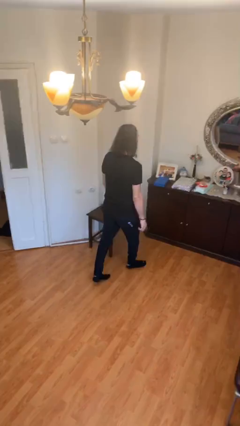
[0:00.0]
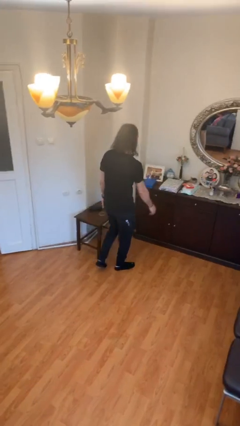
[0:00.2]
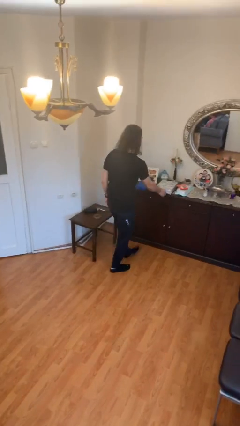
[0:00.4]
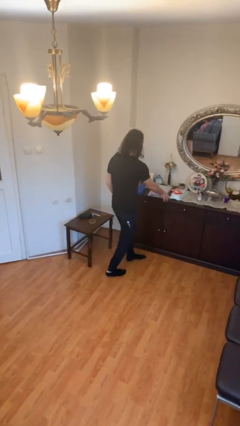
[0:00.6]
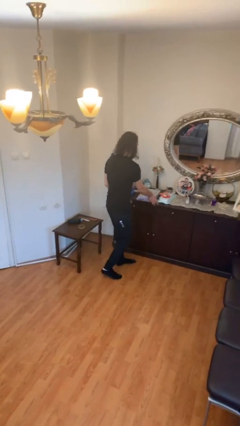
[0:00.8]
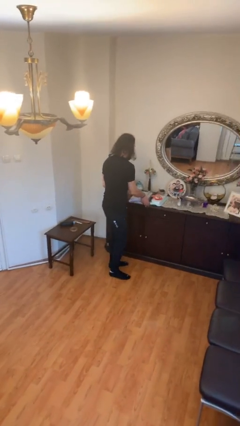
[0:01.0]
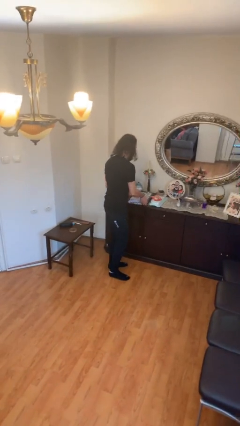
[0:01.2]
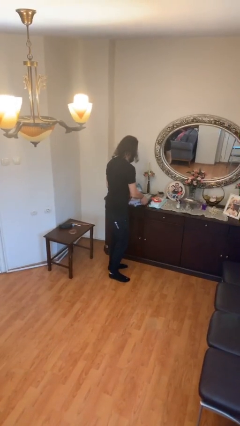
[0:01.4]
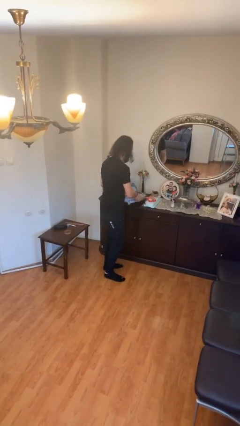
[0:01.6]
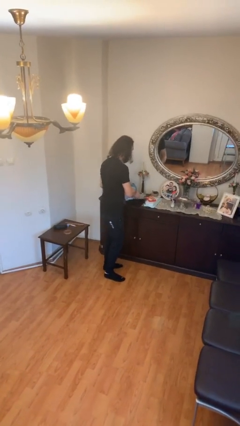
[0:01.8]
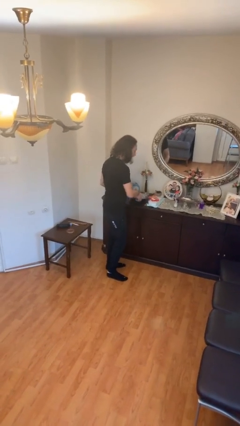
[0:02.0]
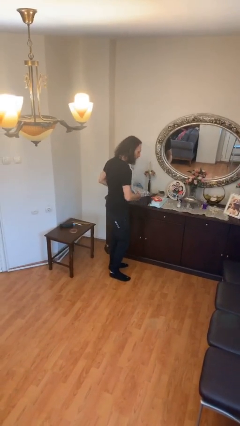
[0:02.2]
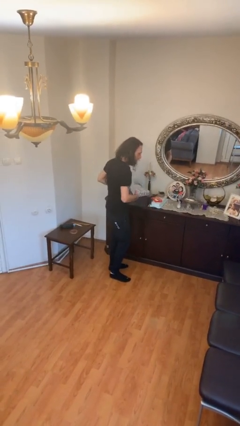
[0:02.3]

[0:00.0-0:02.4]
person picks up object from table

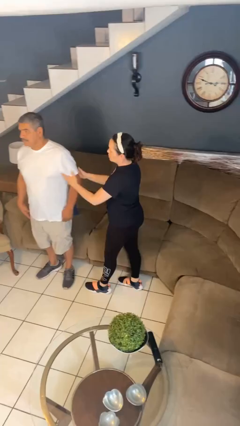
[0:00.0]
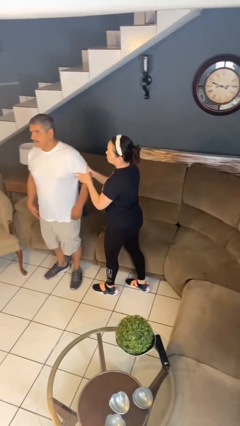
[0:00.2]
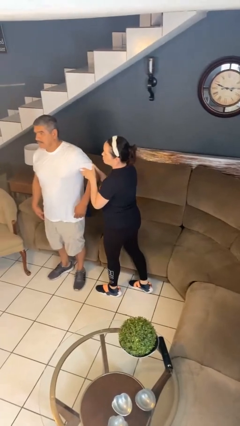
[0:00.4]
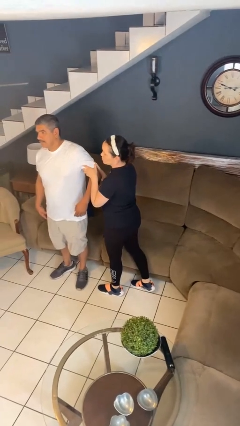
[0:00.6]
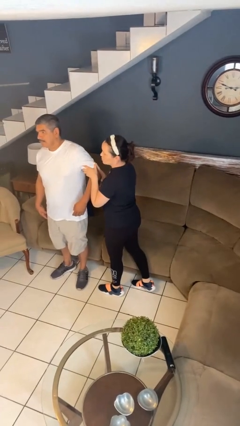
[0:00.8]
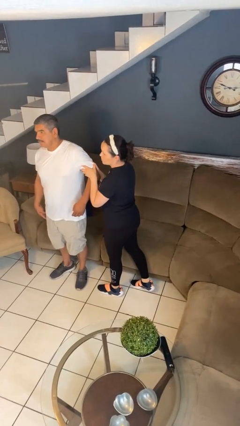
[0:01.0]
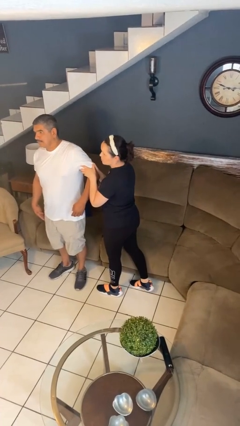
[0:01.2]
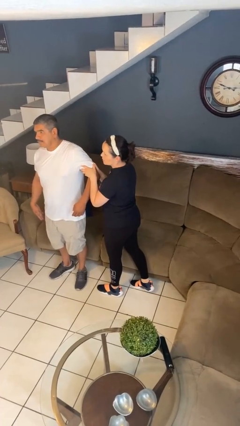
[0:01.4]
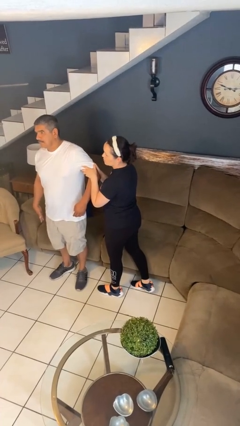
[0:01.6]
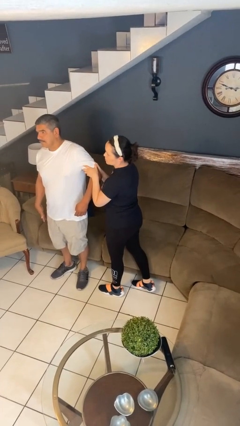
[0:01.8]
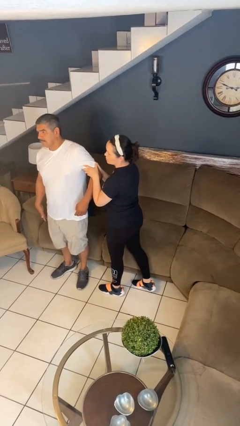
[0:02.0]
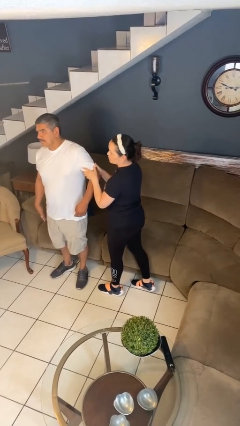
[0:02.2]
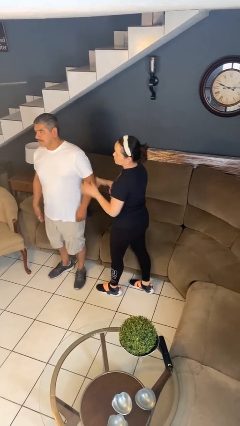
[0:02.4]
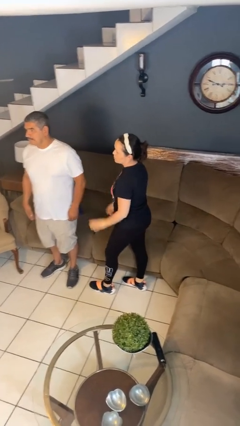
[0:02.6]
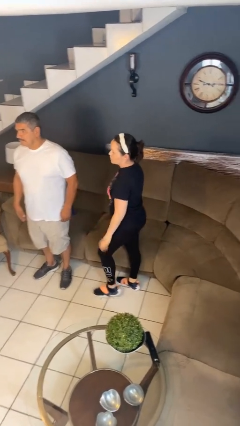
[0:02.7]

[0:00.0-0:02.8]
person grabs person by bicep

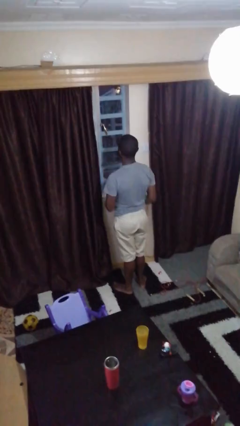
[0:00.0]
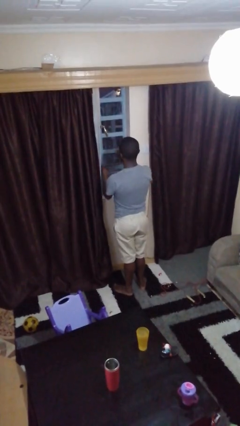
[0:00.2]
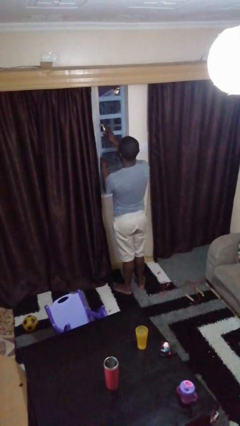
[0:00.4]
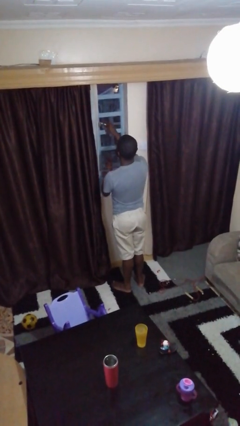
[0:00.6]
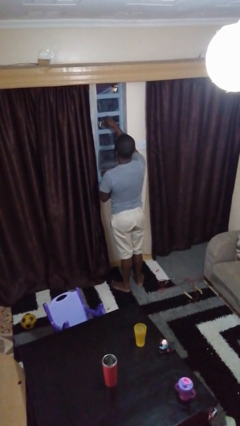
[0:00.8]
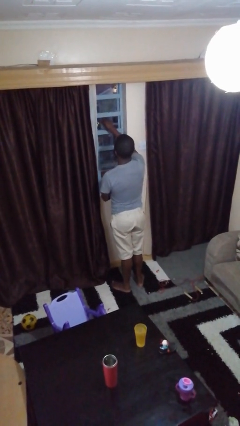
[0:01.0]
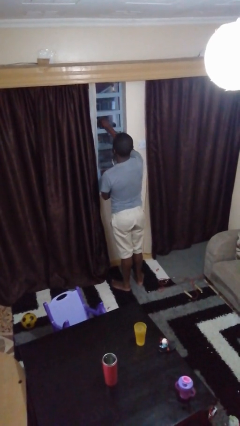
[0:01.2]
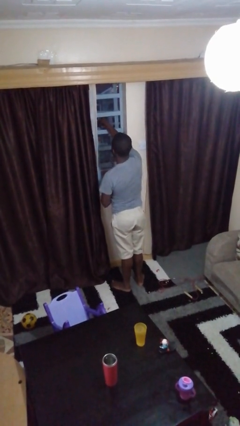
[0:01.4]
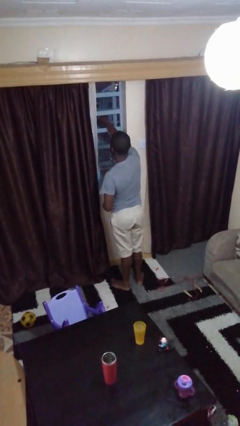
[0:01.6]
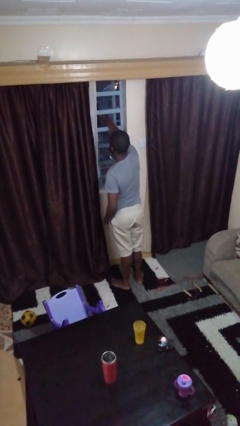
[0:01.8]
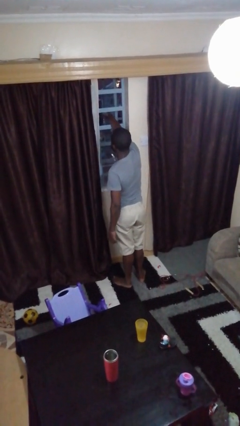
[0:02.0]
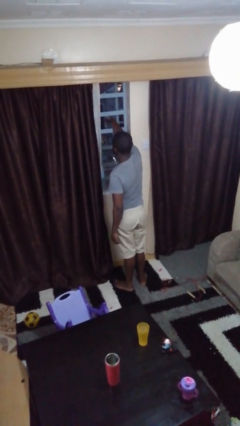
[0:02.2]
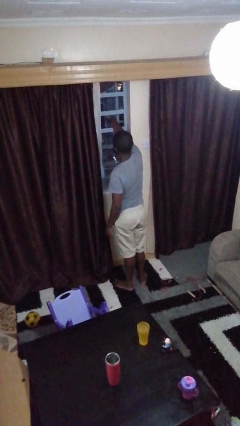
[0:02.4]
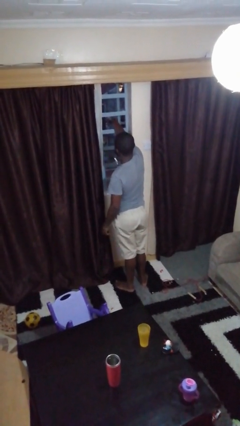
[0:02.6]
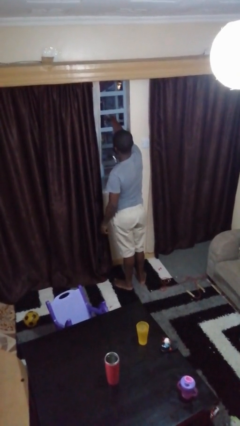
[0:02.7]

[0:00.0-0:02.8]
person opens home window

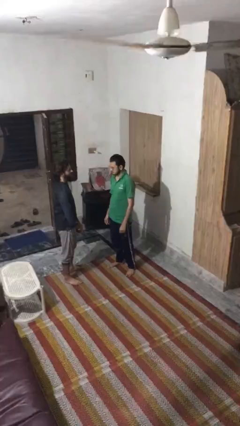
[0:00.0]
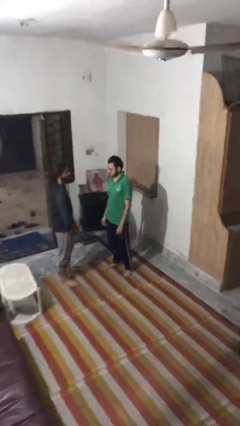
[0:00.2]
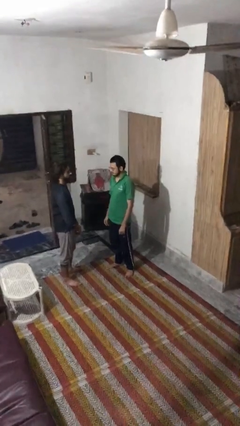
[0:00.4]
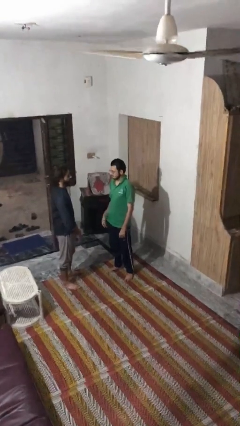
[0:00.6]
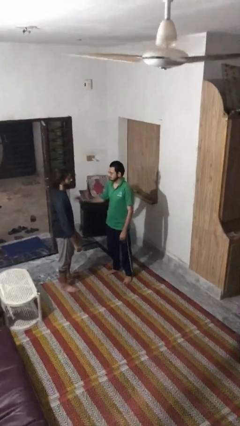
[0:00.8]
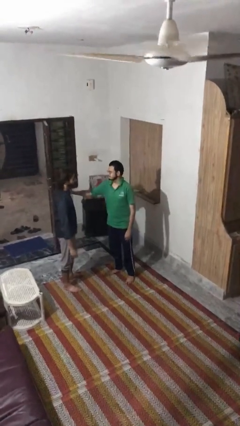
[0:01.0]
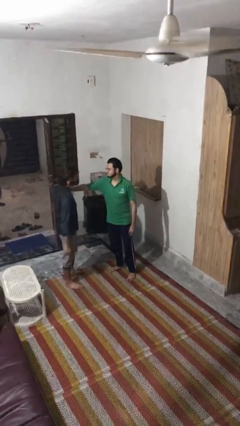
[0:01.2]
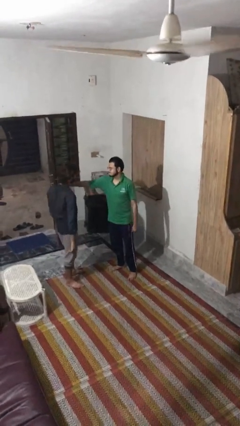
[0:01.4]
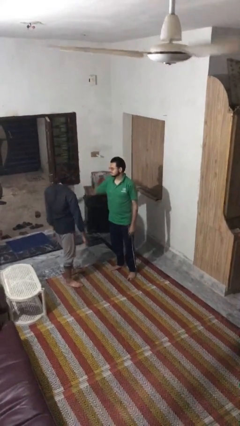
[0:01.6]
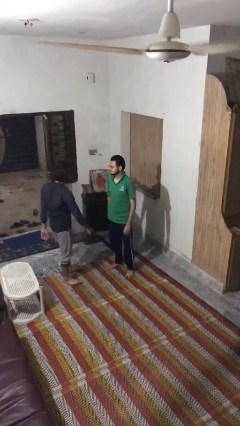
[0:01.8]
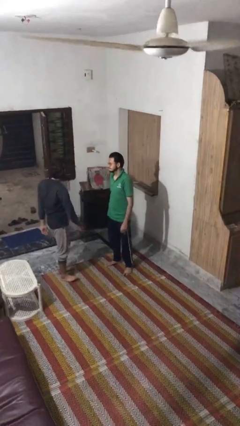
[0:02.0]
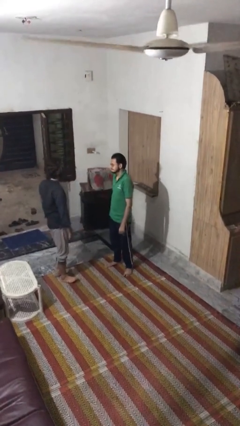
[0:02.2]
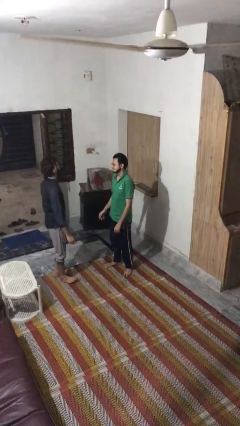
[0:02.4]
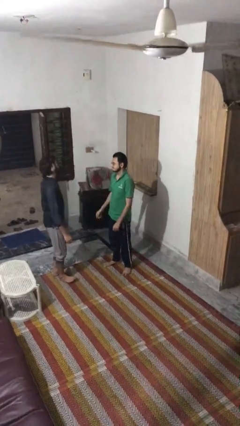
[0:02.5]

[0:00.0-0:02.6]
person shoves person

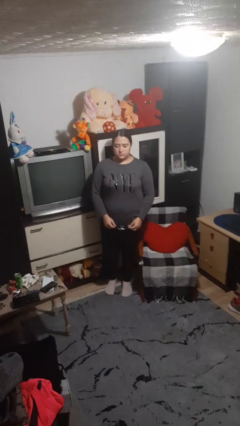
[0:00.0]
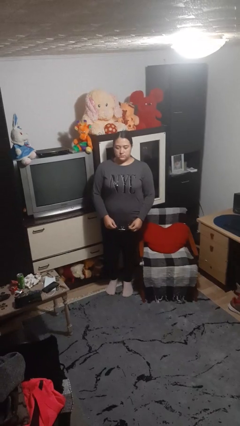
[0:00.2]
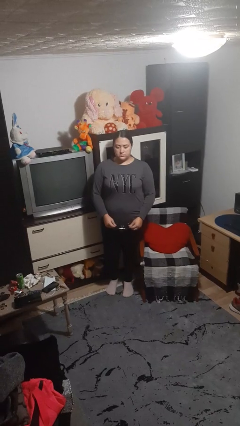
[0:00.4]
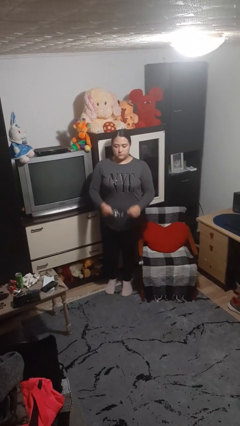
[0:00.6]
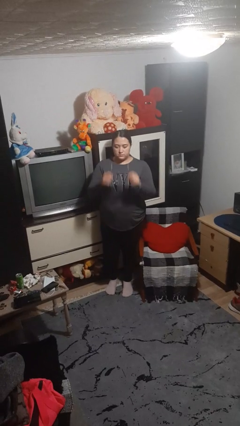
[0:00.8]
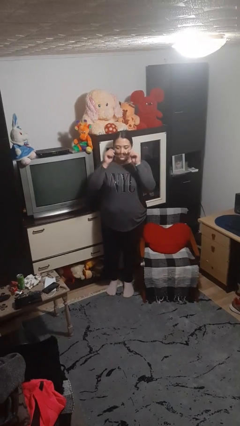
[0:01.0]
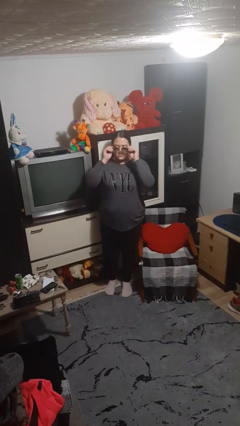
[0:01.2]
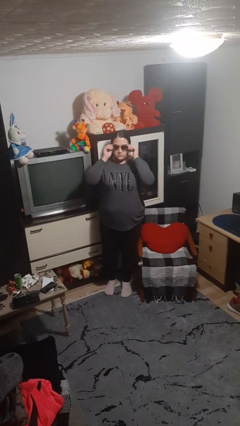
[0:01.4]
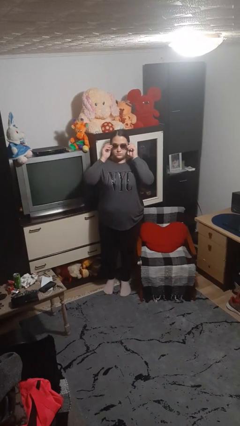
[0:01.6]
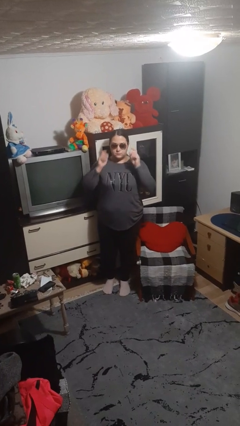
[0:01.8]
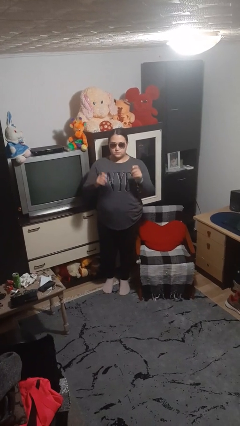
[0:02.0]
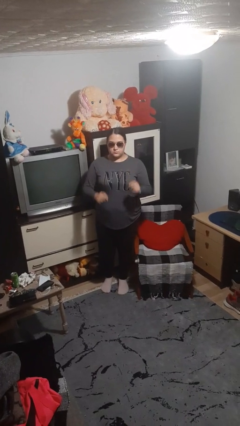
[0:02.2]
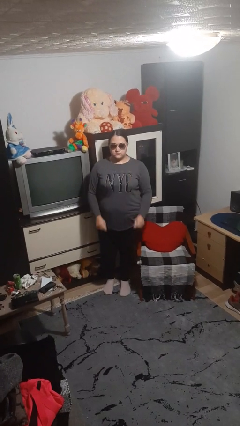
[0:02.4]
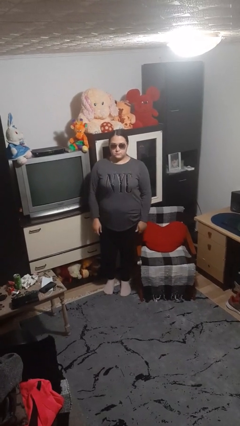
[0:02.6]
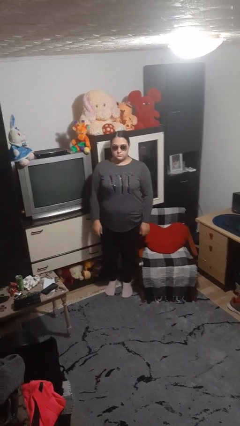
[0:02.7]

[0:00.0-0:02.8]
person puts on sunglasses

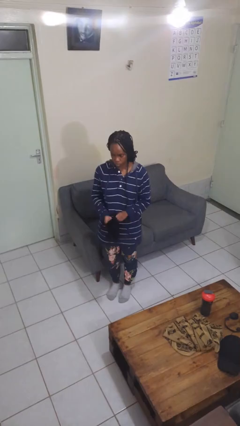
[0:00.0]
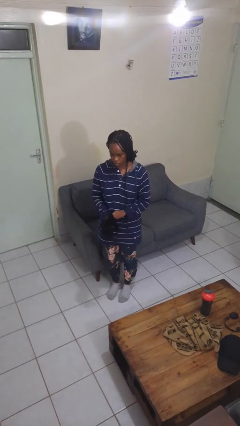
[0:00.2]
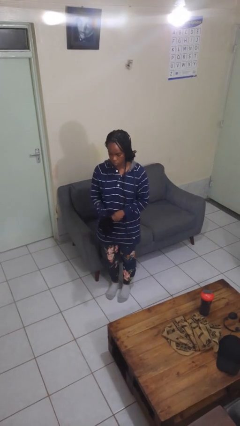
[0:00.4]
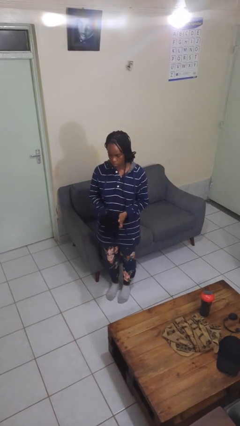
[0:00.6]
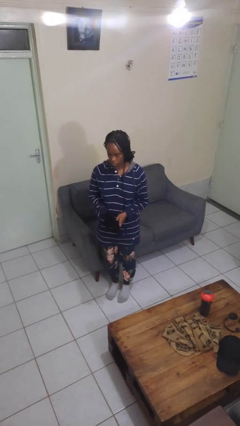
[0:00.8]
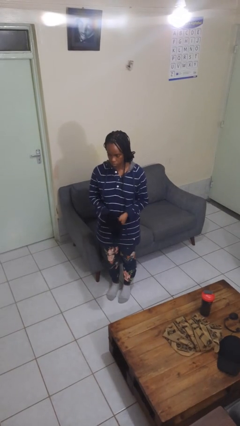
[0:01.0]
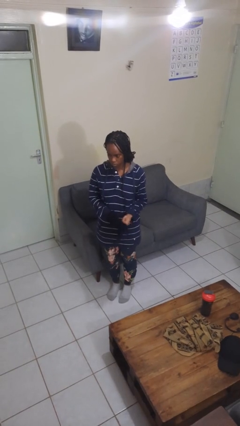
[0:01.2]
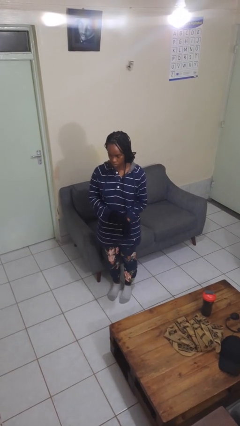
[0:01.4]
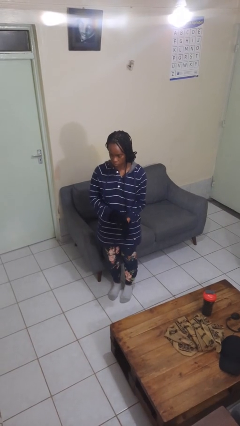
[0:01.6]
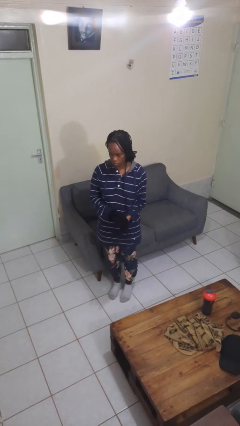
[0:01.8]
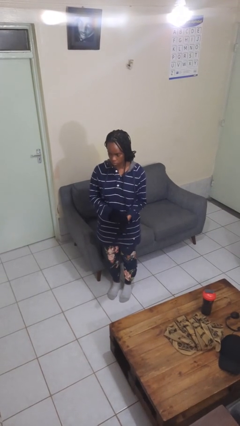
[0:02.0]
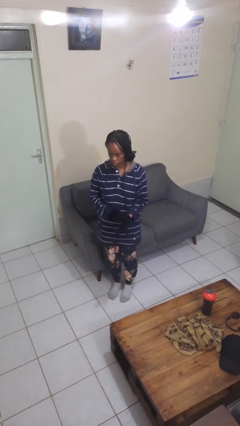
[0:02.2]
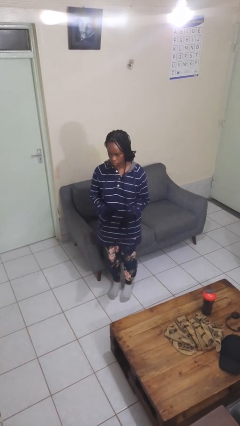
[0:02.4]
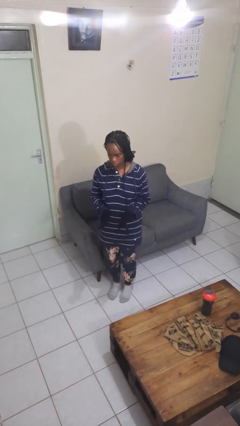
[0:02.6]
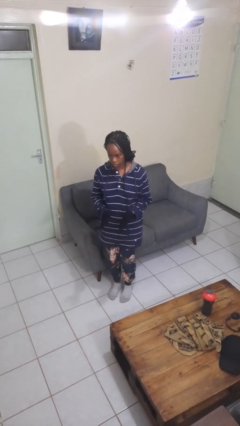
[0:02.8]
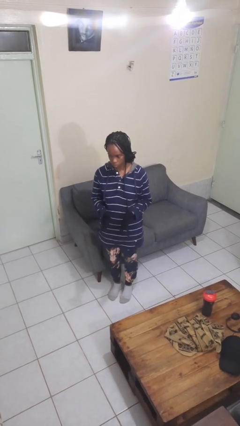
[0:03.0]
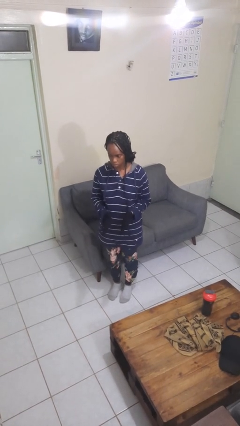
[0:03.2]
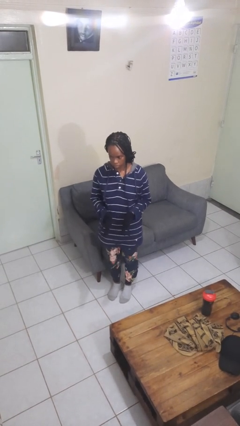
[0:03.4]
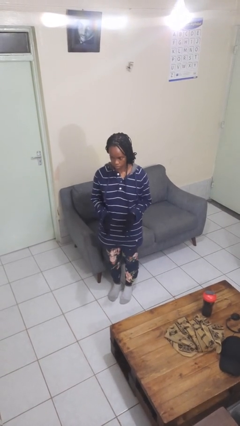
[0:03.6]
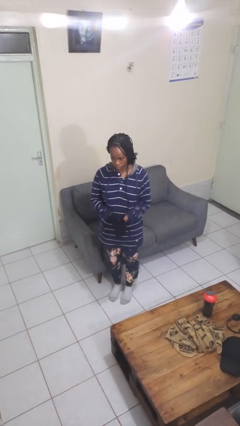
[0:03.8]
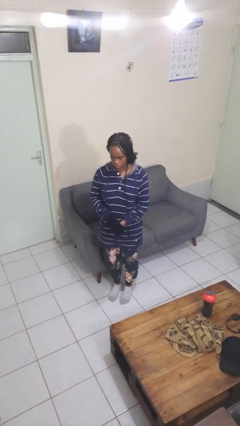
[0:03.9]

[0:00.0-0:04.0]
person puts on gloves

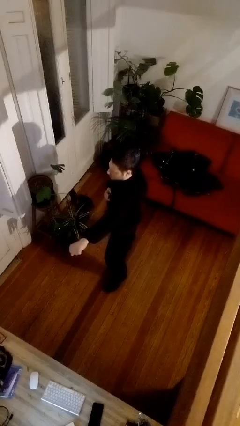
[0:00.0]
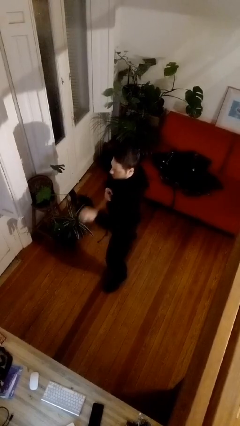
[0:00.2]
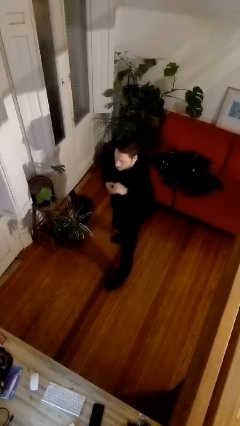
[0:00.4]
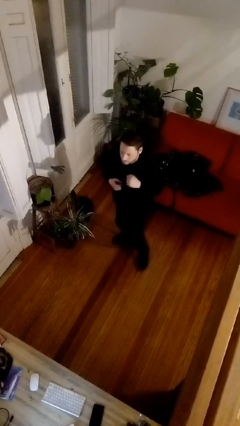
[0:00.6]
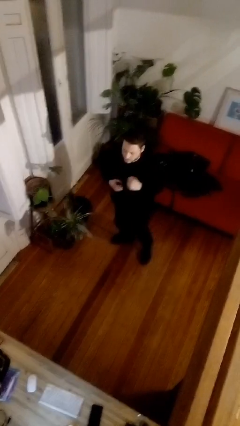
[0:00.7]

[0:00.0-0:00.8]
person punches
